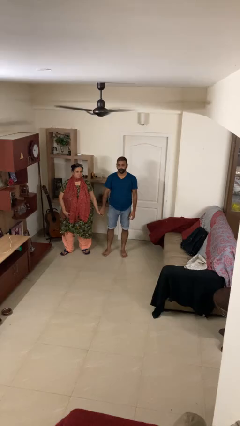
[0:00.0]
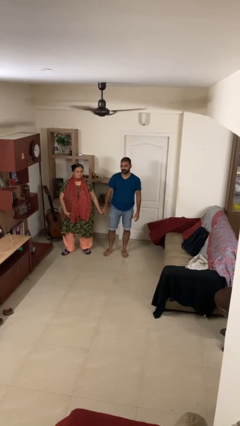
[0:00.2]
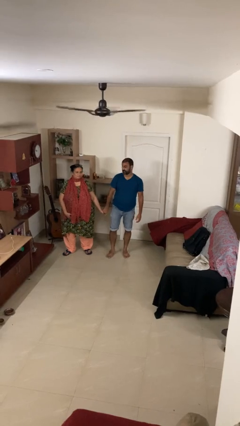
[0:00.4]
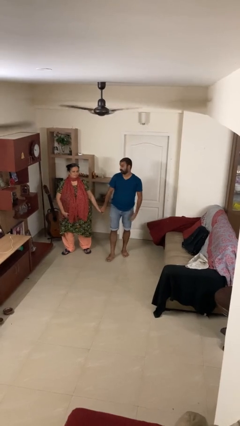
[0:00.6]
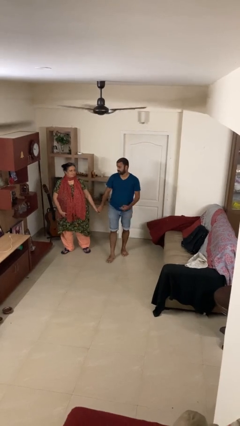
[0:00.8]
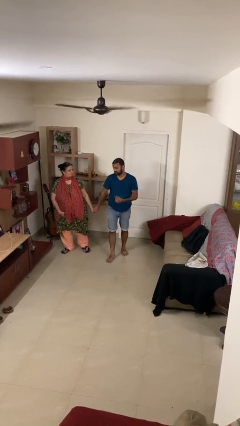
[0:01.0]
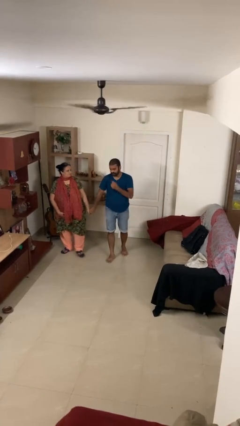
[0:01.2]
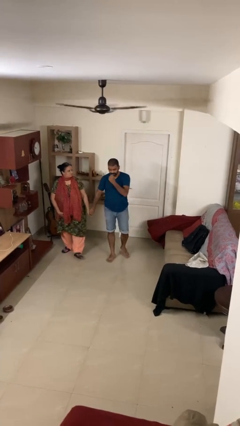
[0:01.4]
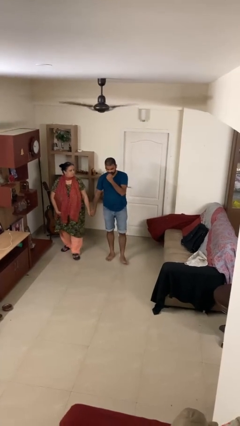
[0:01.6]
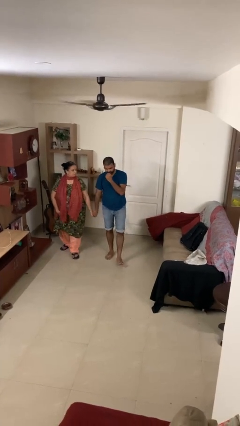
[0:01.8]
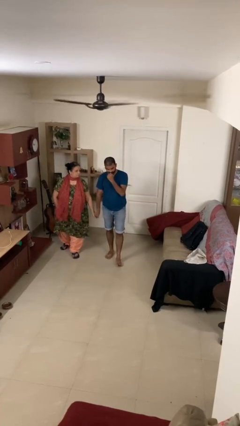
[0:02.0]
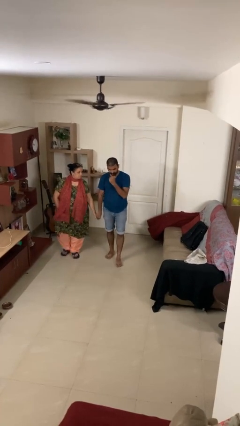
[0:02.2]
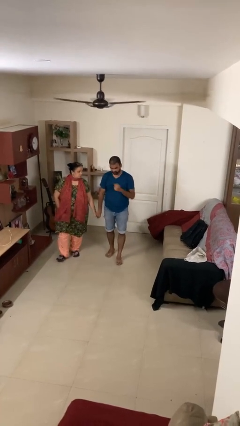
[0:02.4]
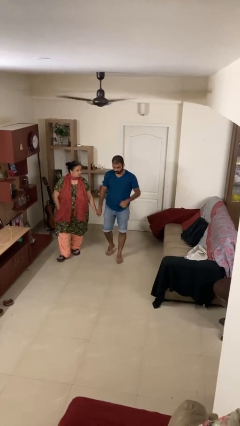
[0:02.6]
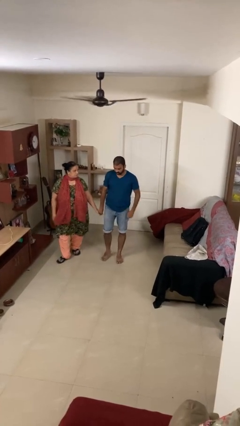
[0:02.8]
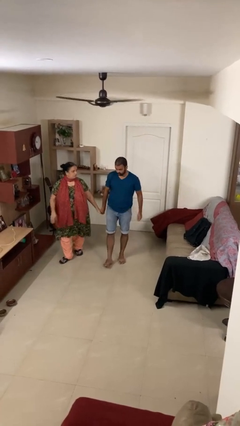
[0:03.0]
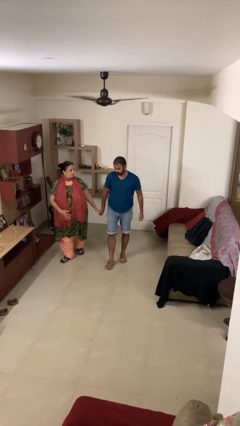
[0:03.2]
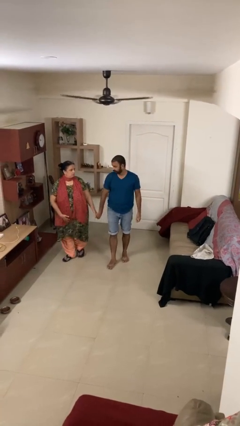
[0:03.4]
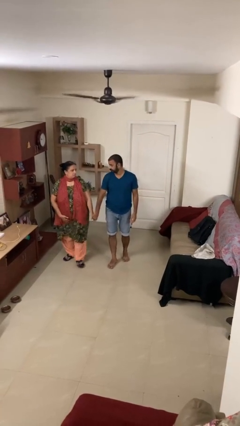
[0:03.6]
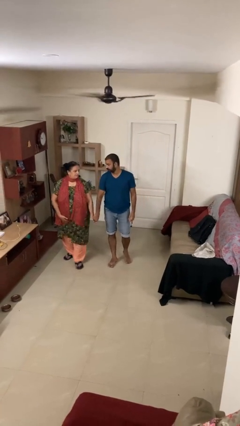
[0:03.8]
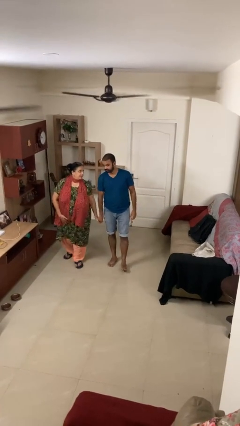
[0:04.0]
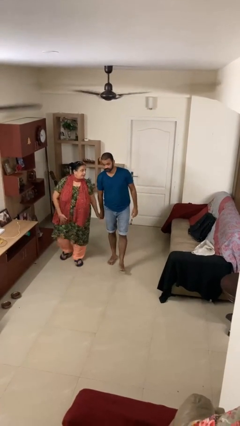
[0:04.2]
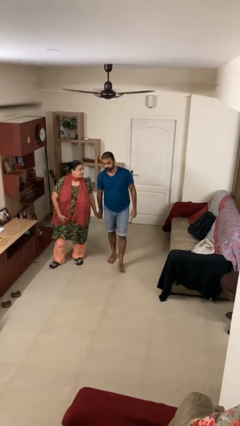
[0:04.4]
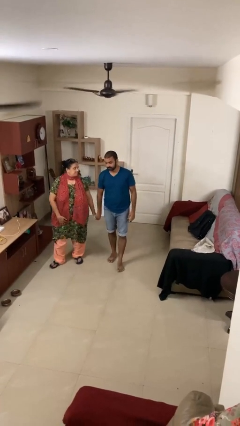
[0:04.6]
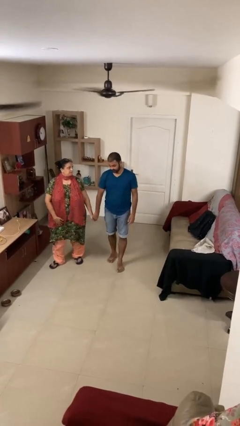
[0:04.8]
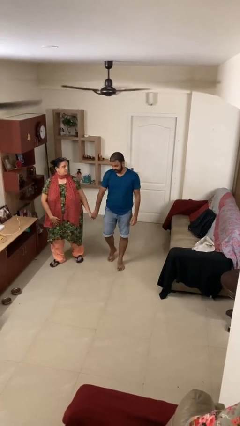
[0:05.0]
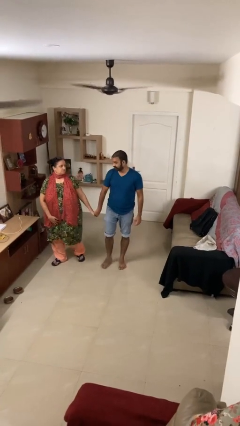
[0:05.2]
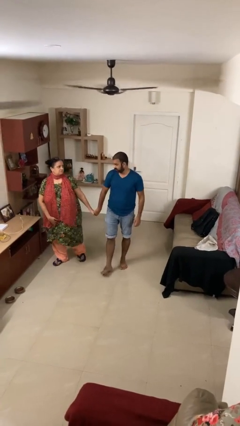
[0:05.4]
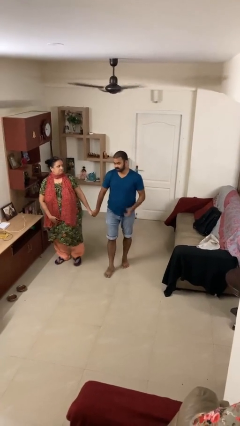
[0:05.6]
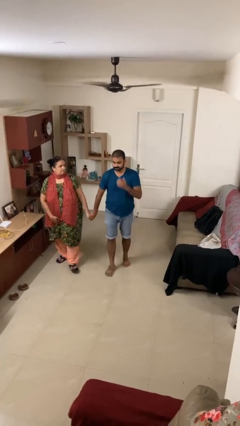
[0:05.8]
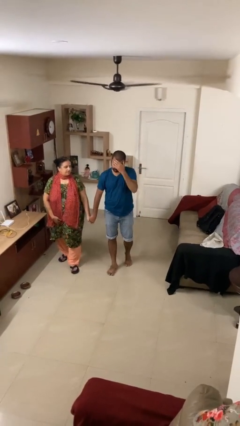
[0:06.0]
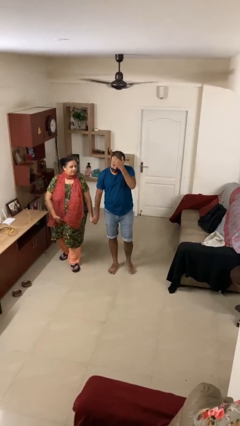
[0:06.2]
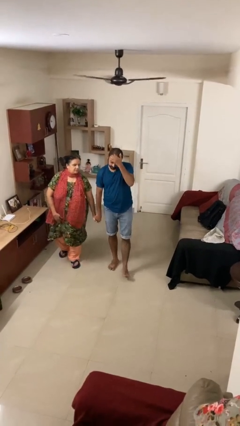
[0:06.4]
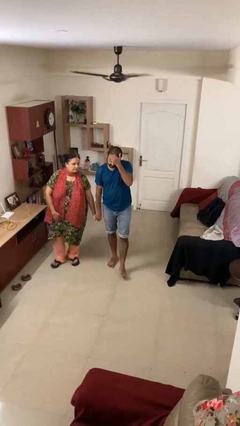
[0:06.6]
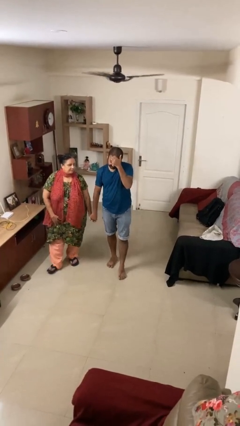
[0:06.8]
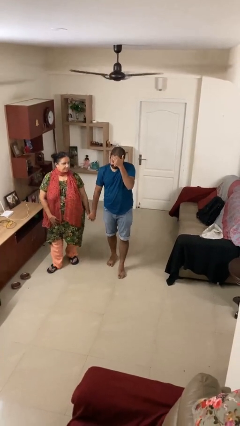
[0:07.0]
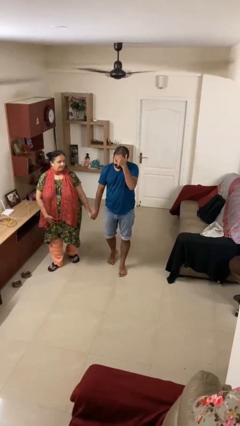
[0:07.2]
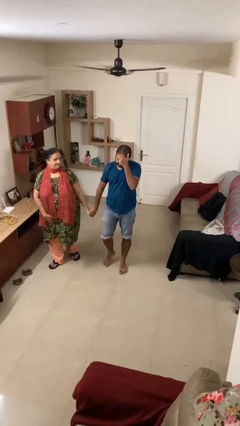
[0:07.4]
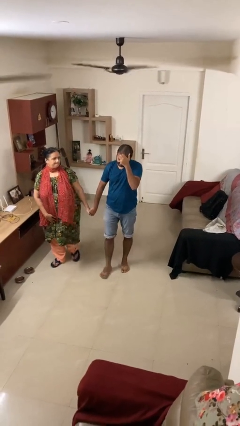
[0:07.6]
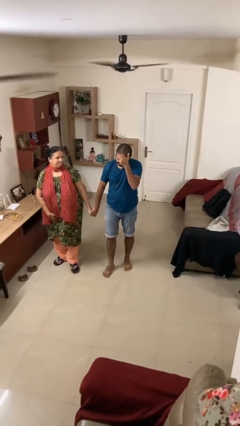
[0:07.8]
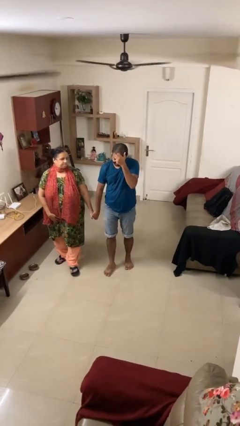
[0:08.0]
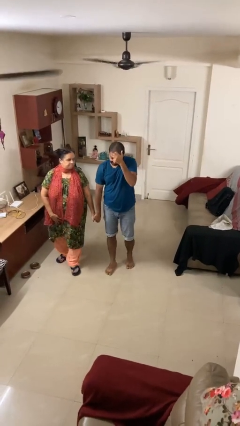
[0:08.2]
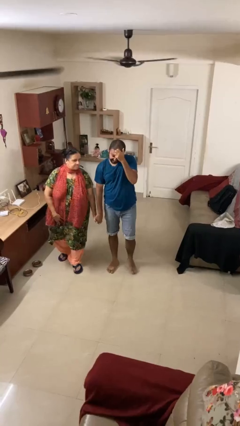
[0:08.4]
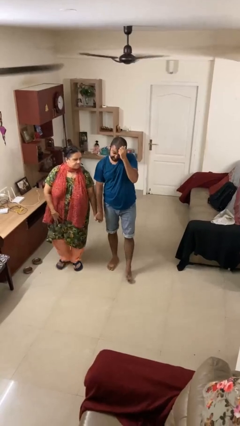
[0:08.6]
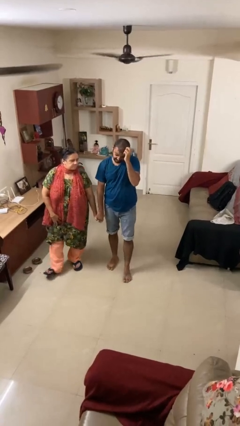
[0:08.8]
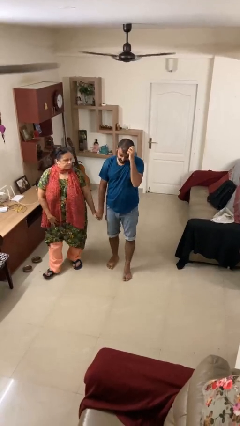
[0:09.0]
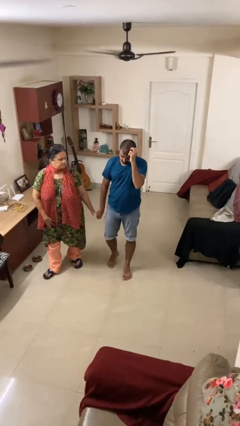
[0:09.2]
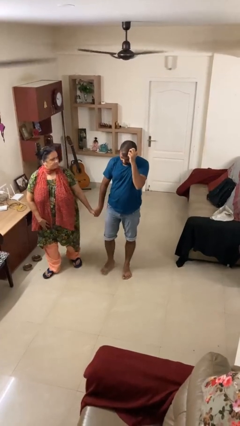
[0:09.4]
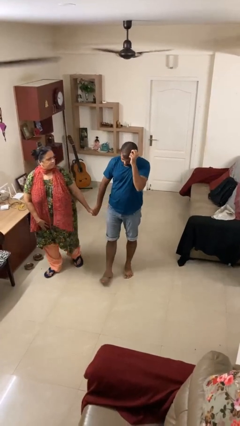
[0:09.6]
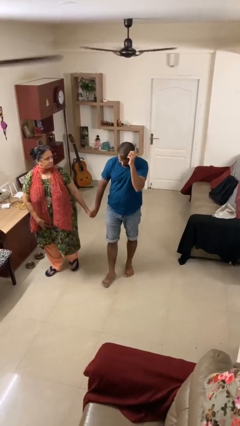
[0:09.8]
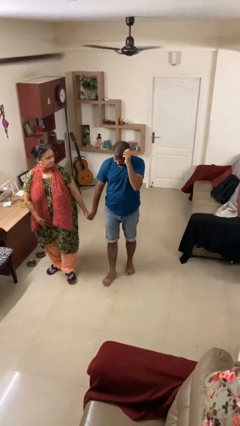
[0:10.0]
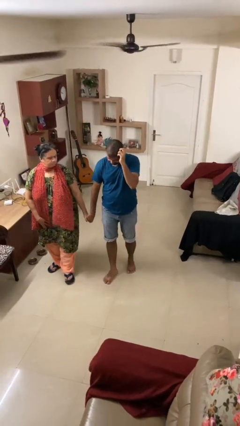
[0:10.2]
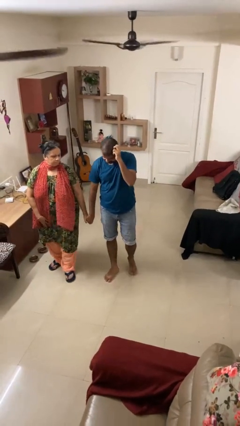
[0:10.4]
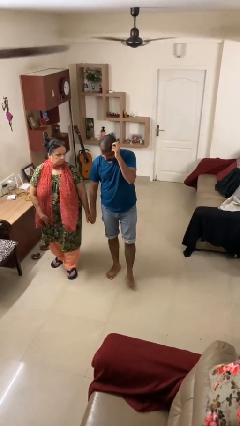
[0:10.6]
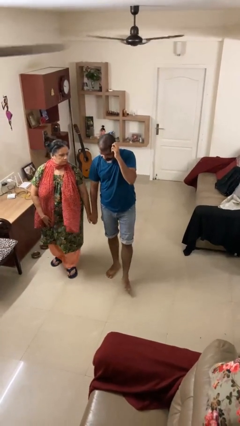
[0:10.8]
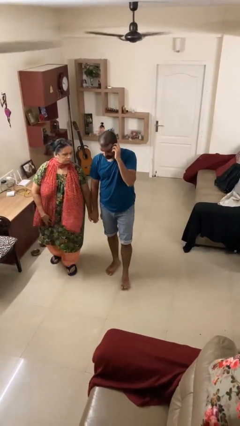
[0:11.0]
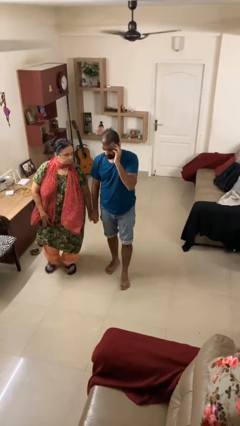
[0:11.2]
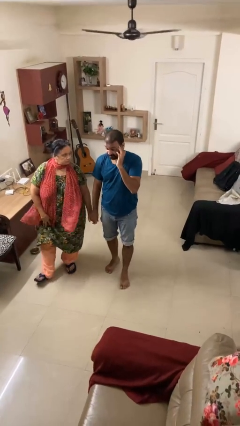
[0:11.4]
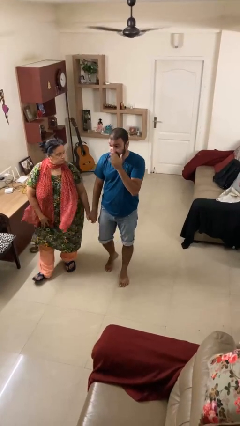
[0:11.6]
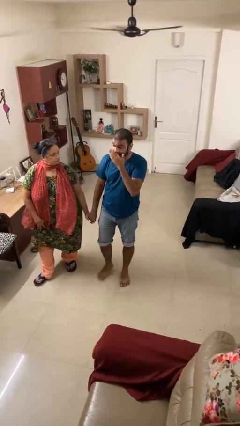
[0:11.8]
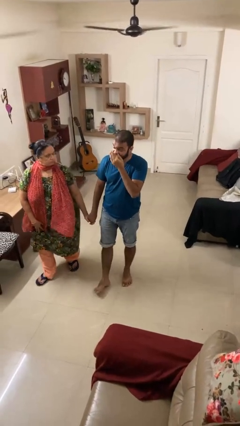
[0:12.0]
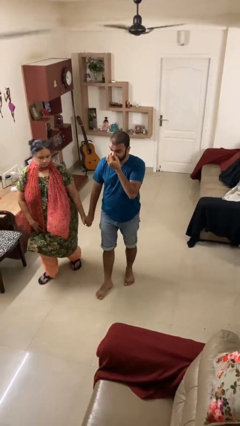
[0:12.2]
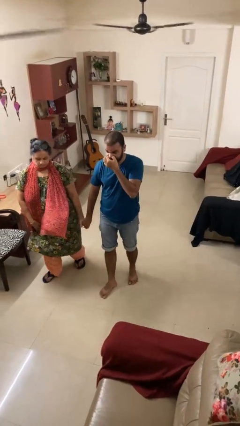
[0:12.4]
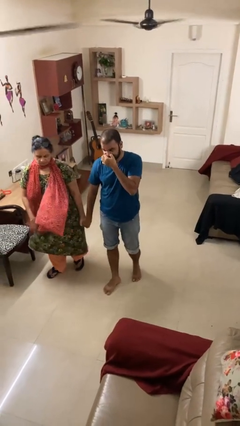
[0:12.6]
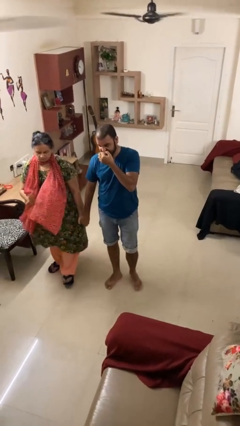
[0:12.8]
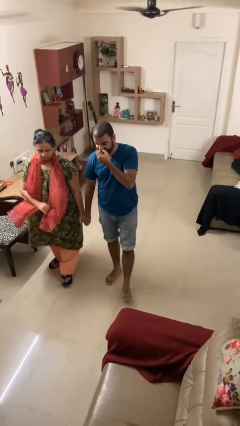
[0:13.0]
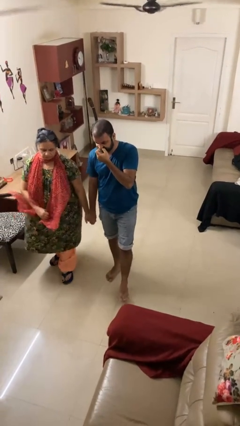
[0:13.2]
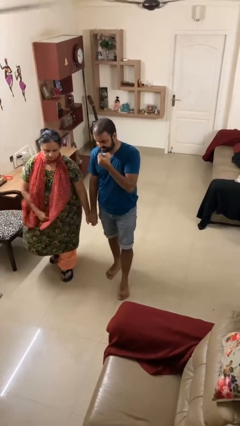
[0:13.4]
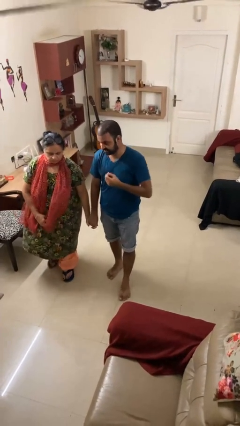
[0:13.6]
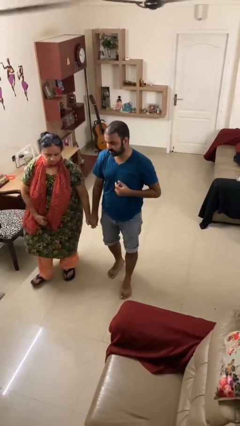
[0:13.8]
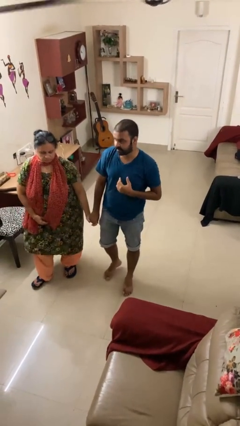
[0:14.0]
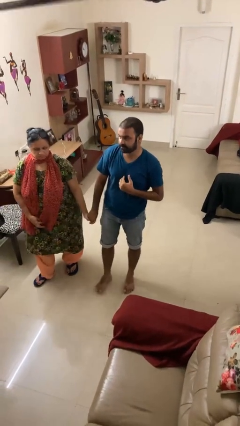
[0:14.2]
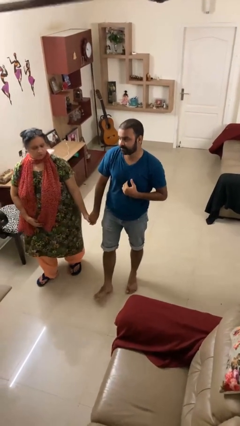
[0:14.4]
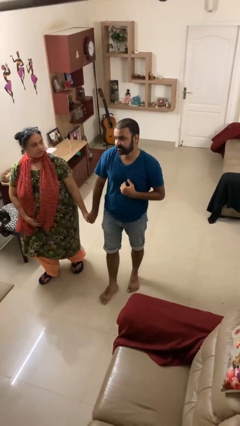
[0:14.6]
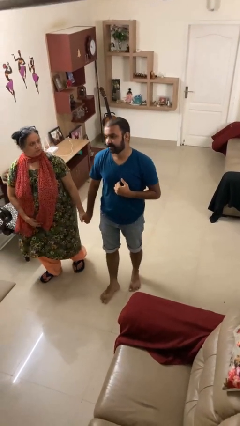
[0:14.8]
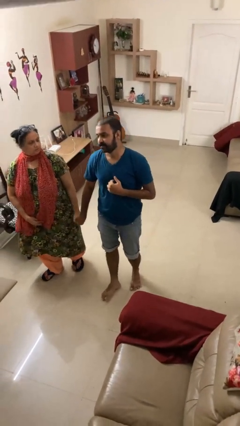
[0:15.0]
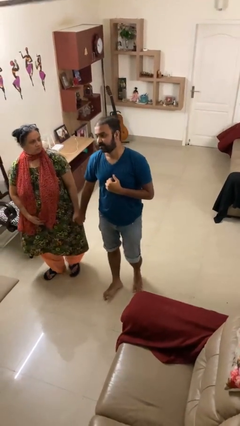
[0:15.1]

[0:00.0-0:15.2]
person holds hand

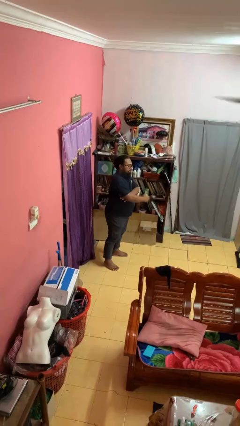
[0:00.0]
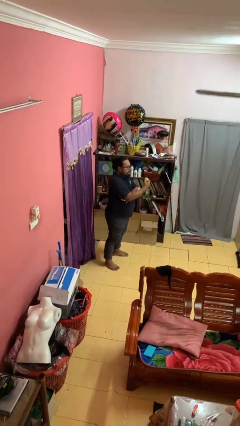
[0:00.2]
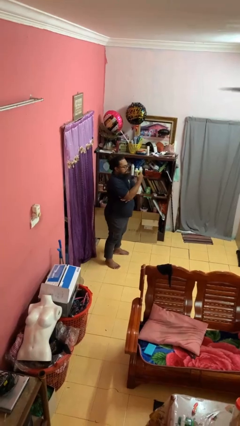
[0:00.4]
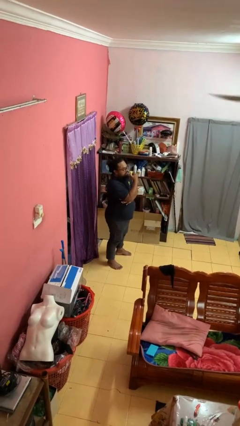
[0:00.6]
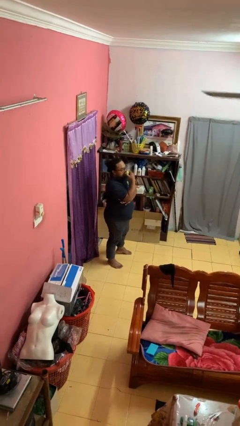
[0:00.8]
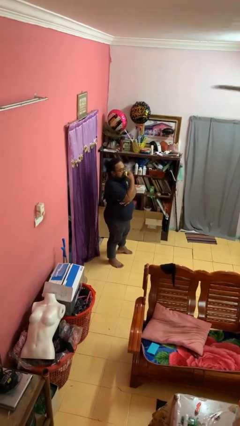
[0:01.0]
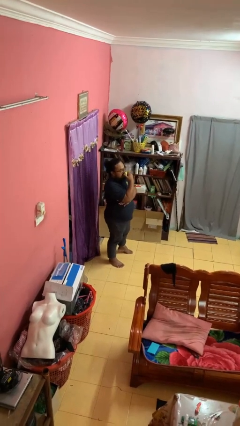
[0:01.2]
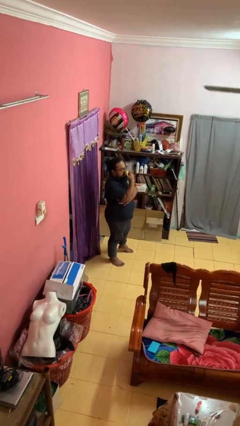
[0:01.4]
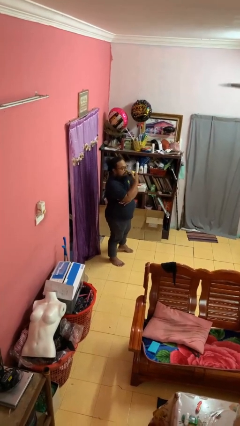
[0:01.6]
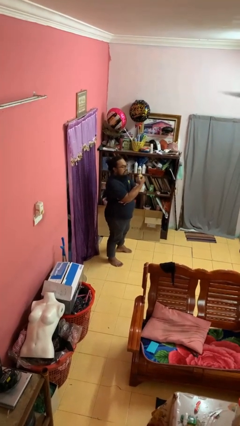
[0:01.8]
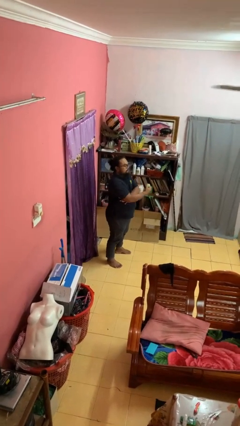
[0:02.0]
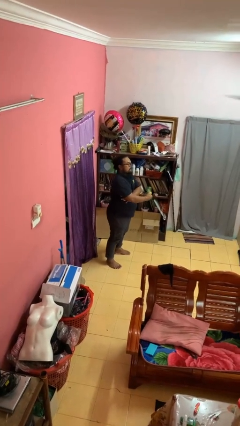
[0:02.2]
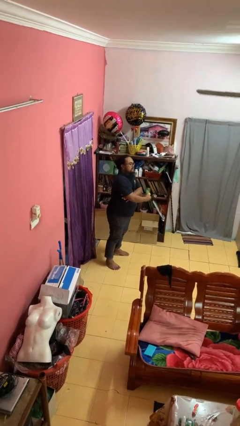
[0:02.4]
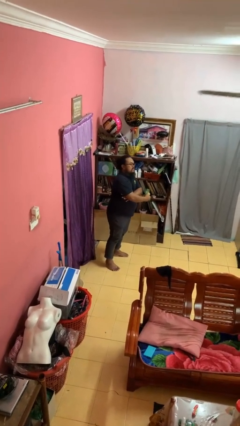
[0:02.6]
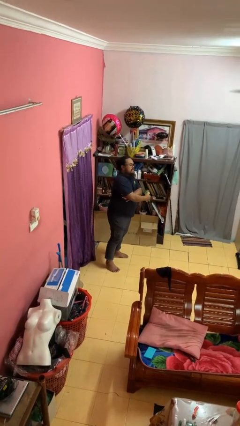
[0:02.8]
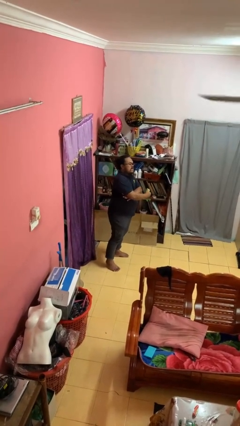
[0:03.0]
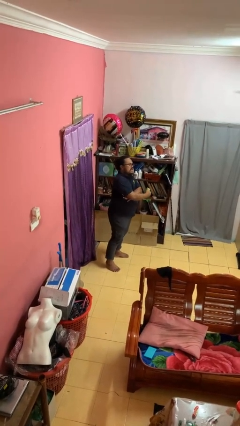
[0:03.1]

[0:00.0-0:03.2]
person eats apple
